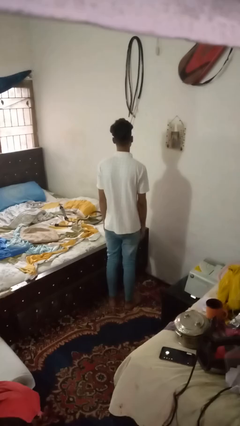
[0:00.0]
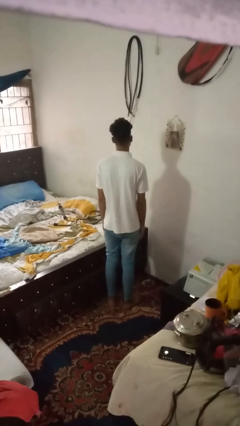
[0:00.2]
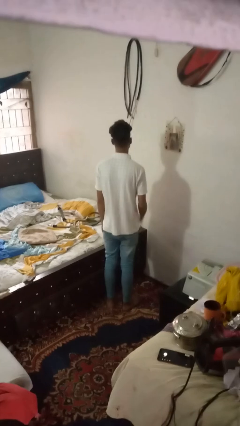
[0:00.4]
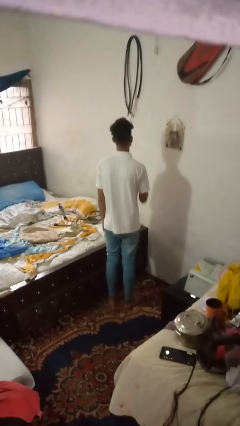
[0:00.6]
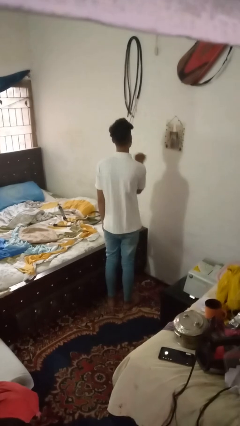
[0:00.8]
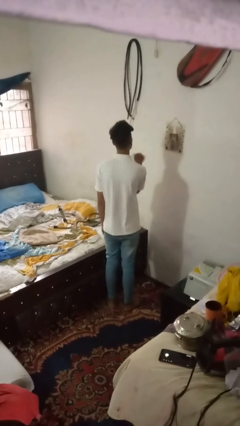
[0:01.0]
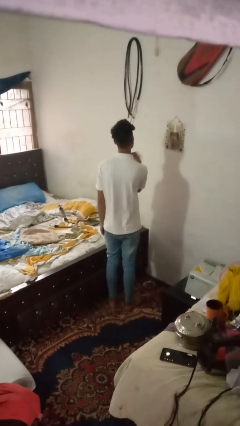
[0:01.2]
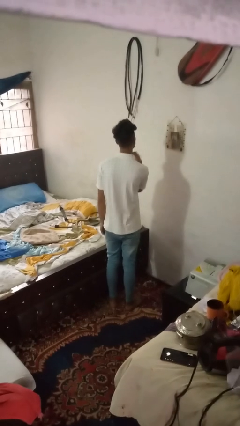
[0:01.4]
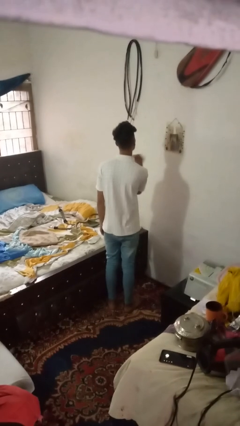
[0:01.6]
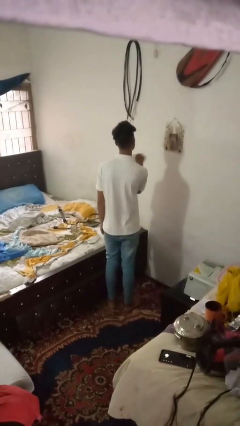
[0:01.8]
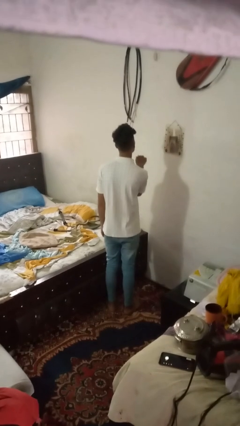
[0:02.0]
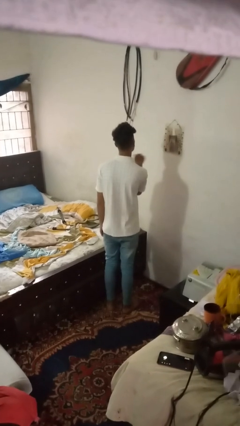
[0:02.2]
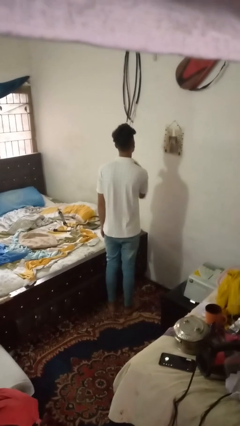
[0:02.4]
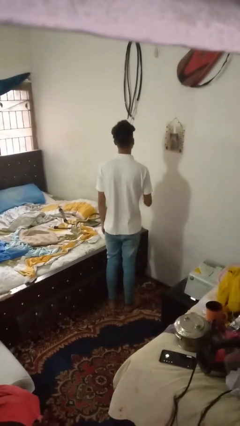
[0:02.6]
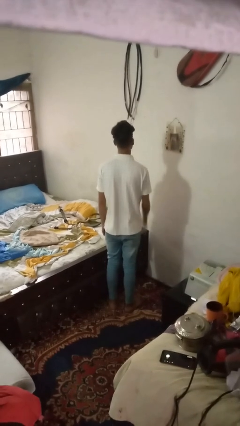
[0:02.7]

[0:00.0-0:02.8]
person gestures cut

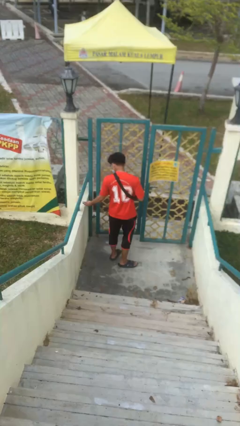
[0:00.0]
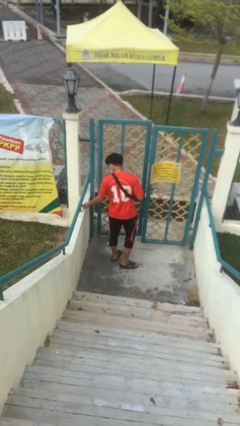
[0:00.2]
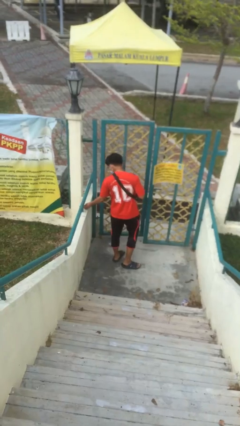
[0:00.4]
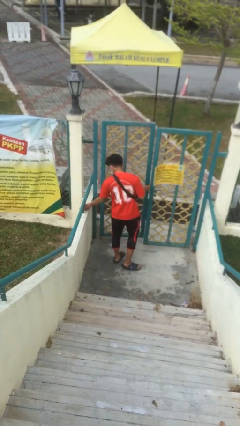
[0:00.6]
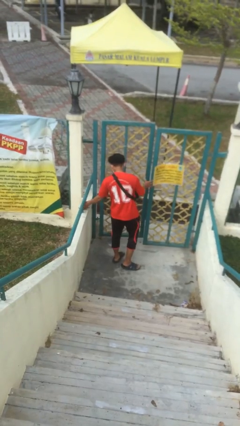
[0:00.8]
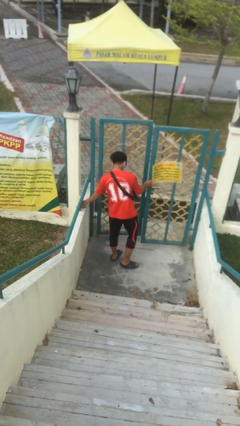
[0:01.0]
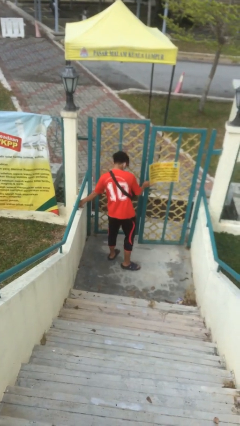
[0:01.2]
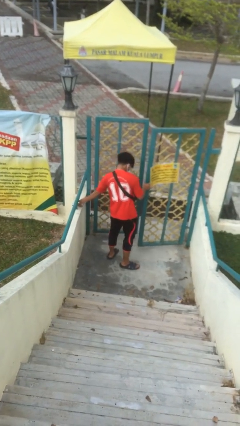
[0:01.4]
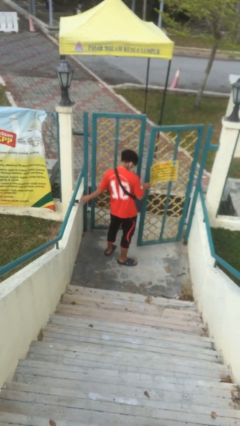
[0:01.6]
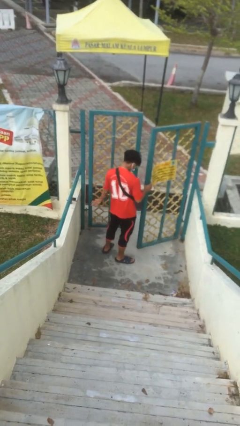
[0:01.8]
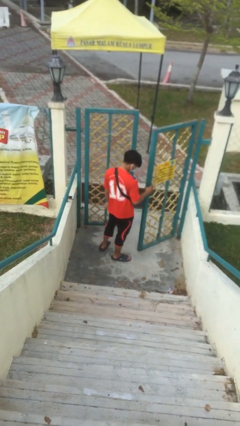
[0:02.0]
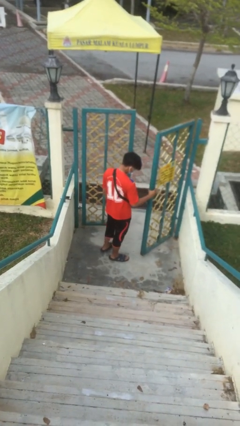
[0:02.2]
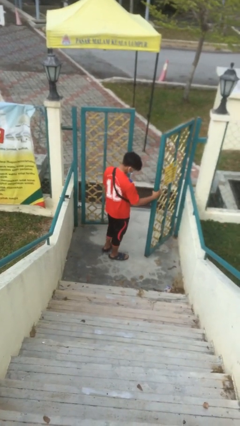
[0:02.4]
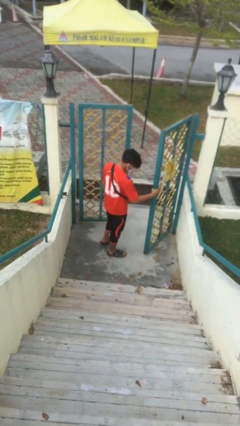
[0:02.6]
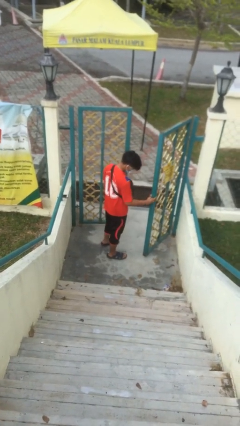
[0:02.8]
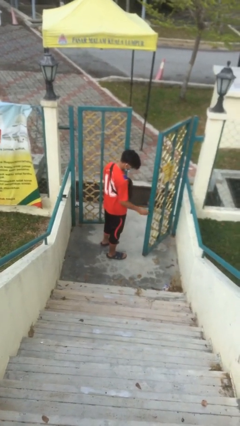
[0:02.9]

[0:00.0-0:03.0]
person opens facility door

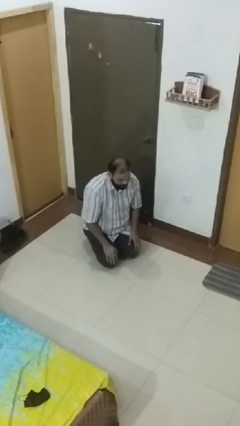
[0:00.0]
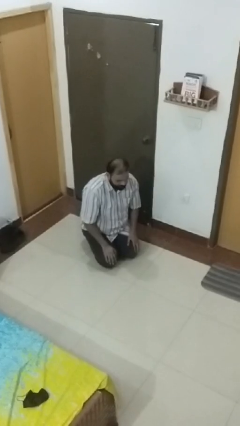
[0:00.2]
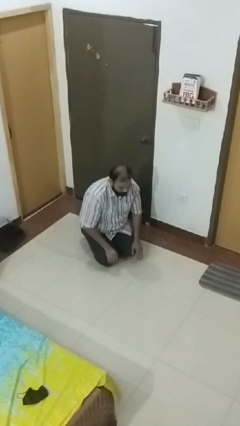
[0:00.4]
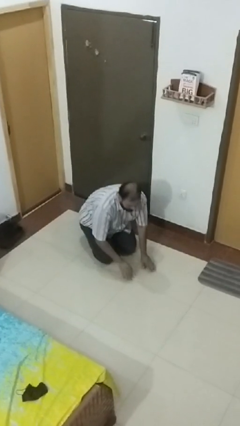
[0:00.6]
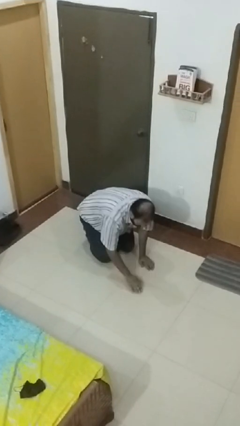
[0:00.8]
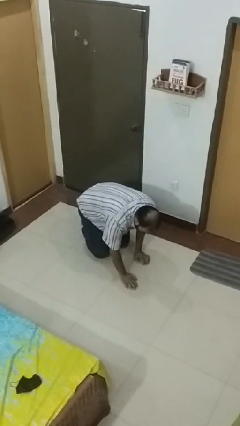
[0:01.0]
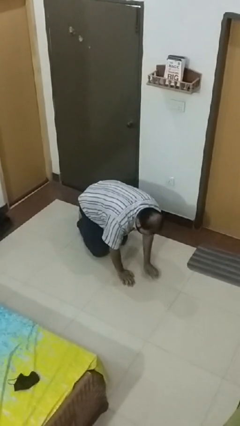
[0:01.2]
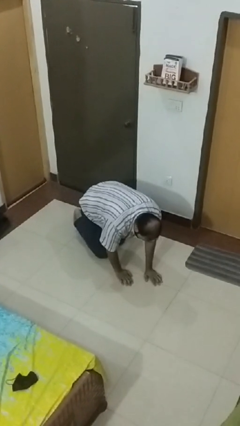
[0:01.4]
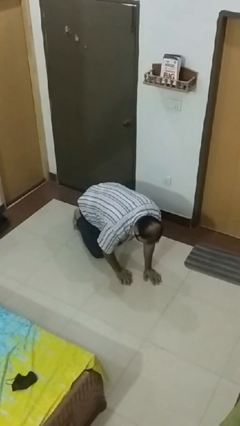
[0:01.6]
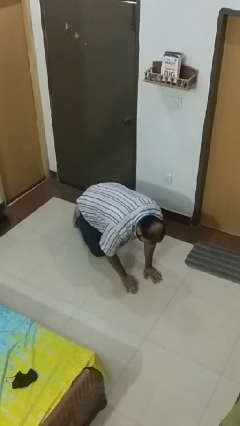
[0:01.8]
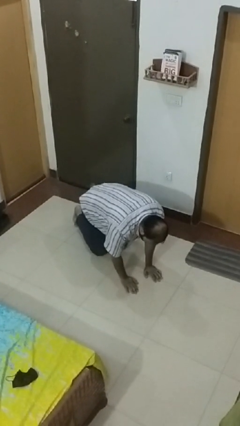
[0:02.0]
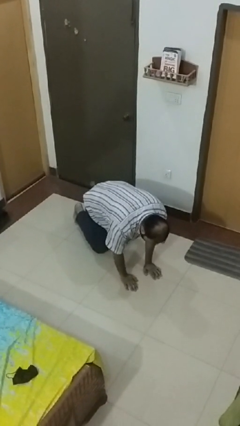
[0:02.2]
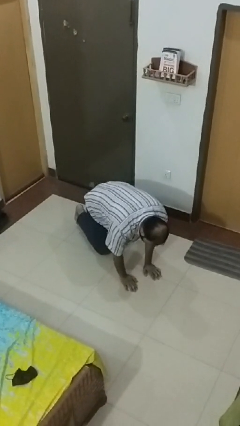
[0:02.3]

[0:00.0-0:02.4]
person crawls

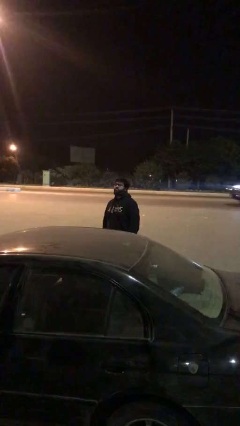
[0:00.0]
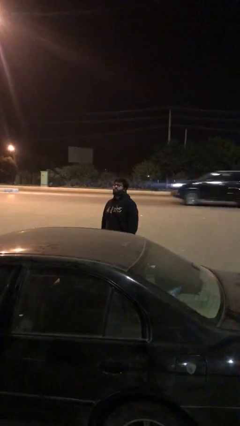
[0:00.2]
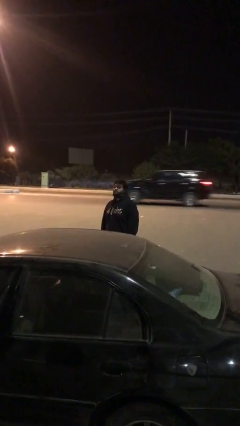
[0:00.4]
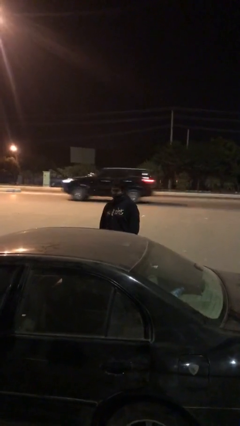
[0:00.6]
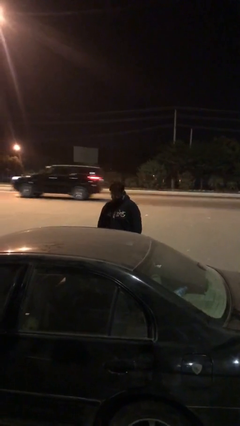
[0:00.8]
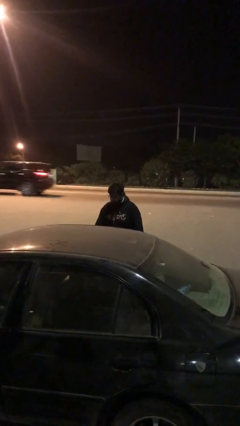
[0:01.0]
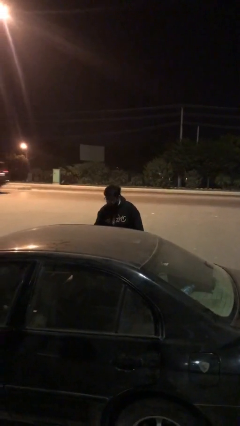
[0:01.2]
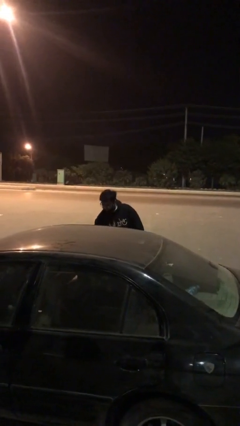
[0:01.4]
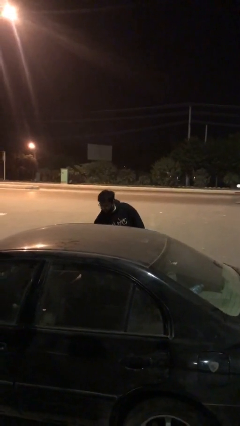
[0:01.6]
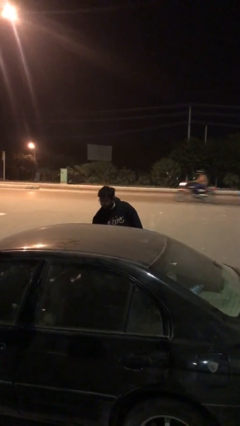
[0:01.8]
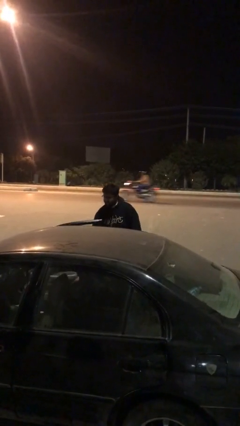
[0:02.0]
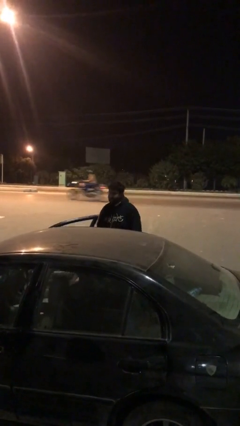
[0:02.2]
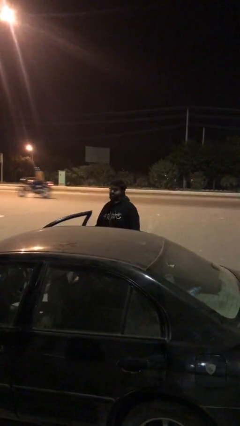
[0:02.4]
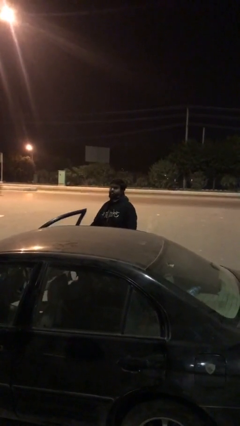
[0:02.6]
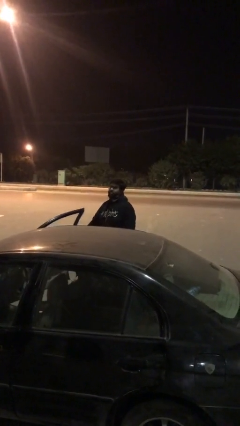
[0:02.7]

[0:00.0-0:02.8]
person opens car door

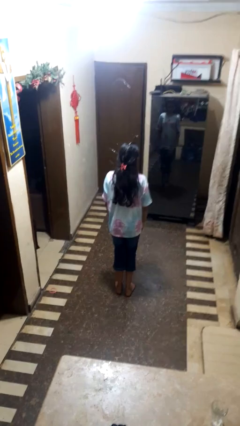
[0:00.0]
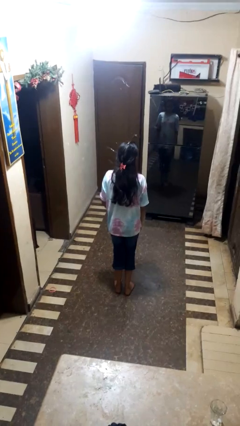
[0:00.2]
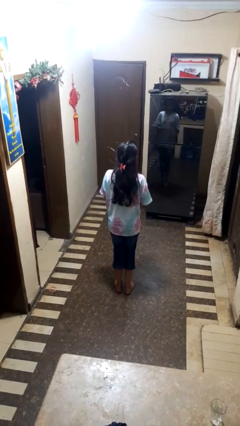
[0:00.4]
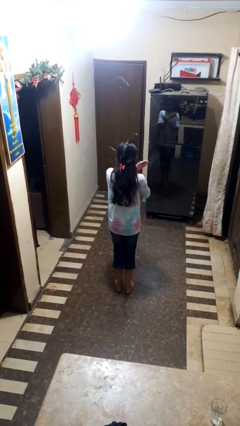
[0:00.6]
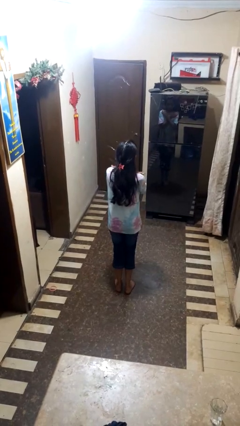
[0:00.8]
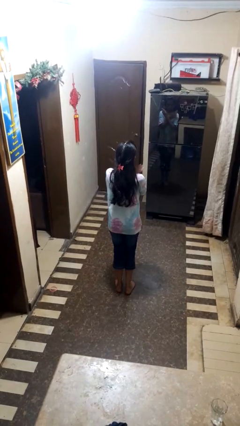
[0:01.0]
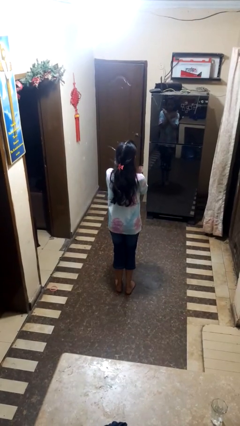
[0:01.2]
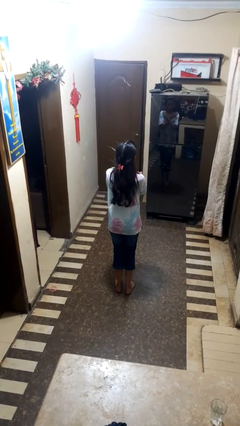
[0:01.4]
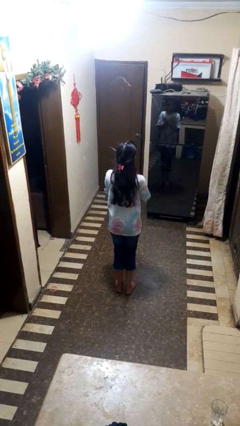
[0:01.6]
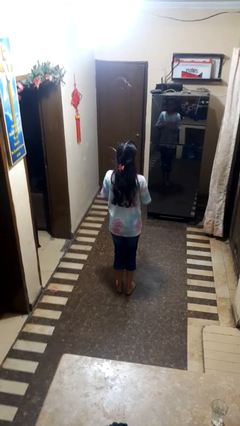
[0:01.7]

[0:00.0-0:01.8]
person drums on chest

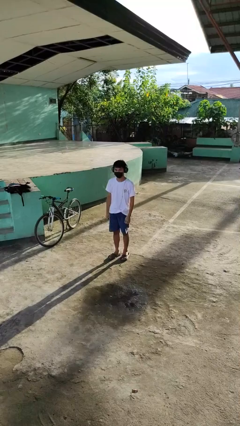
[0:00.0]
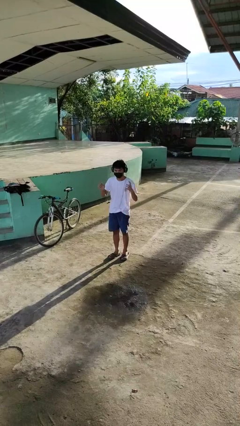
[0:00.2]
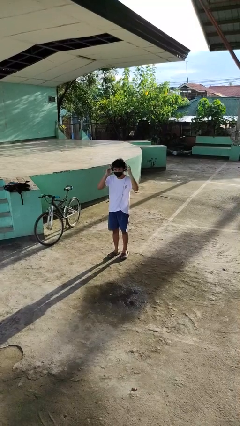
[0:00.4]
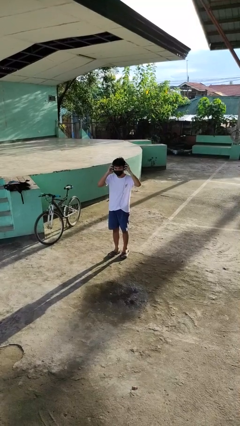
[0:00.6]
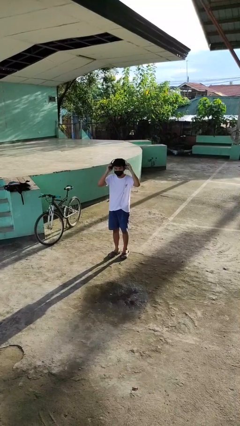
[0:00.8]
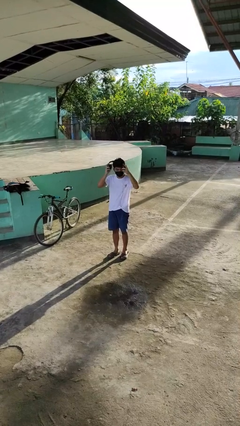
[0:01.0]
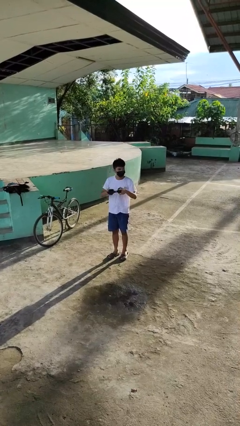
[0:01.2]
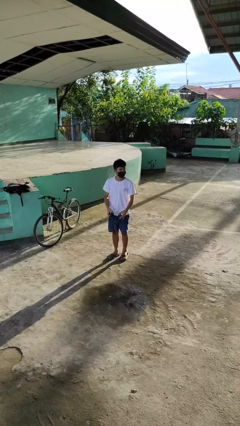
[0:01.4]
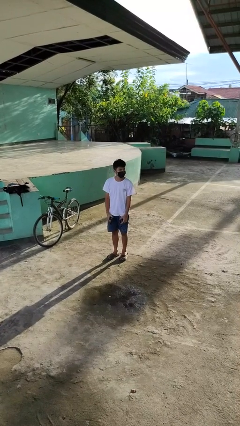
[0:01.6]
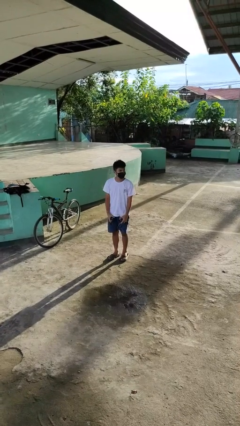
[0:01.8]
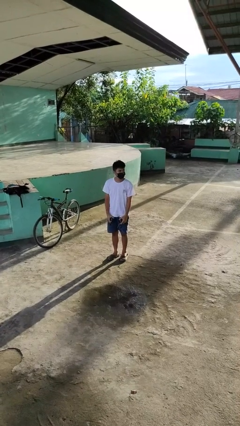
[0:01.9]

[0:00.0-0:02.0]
person takes off headphones

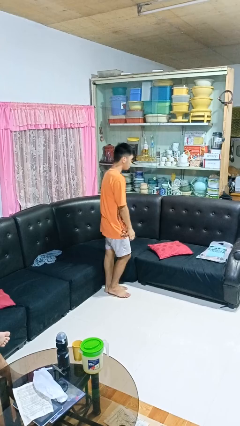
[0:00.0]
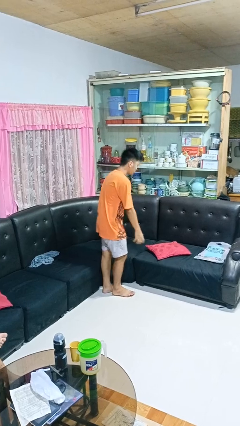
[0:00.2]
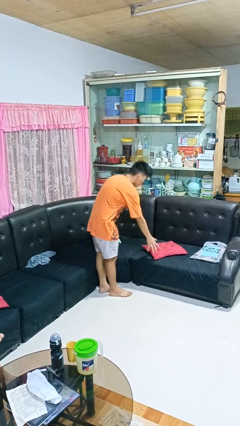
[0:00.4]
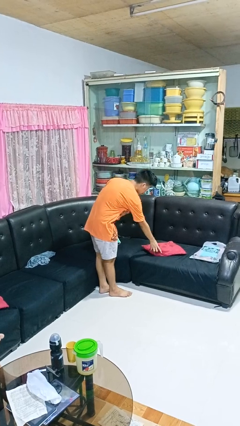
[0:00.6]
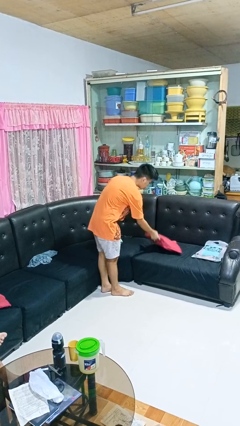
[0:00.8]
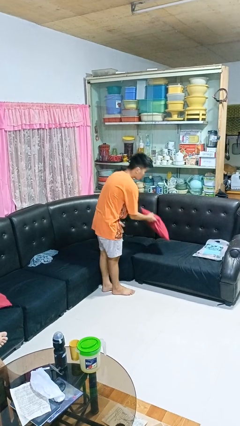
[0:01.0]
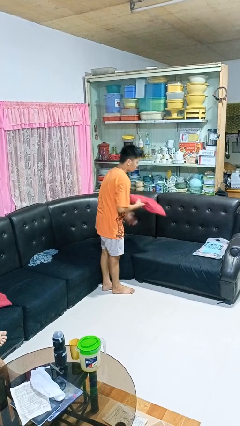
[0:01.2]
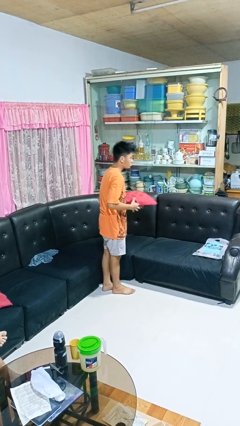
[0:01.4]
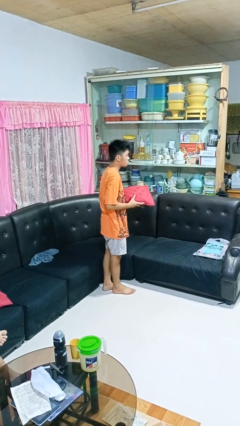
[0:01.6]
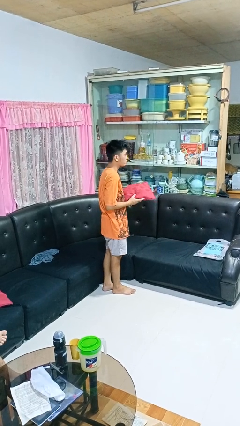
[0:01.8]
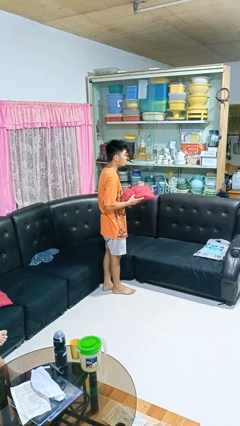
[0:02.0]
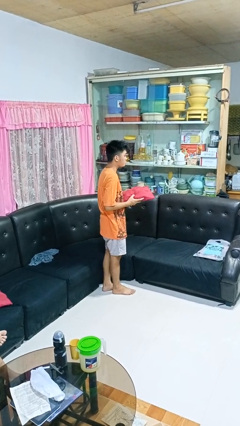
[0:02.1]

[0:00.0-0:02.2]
person picks up object from couch
